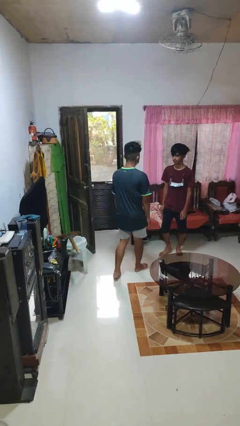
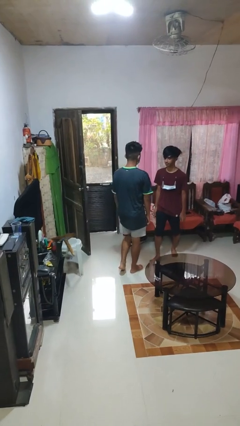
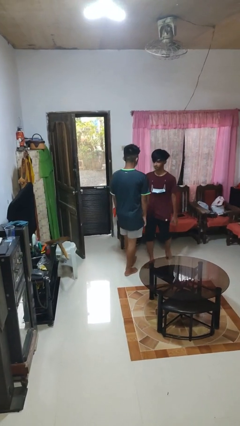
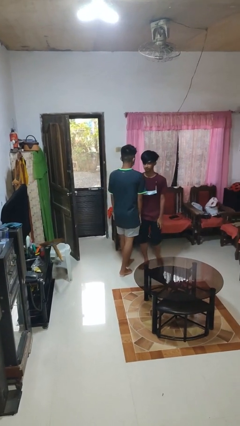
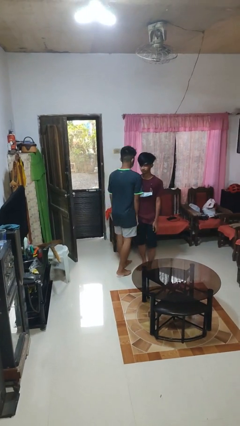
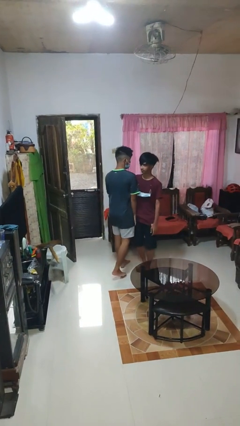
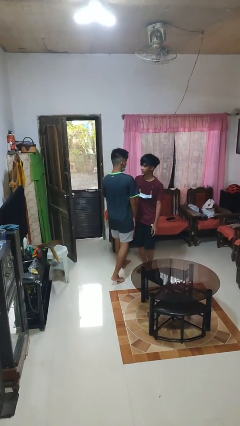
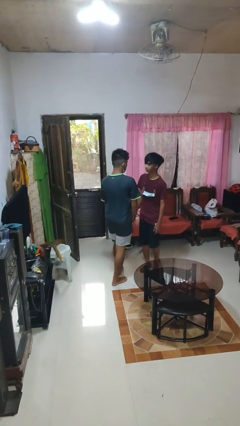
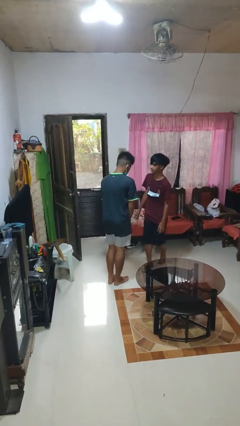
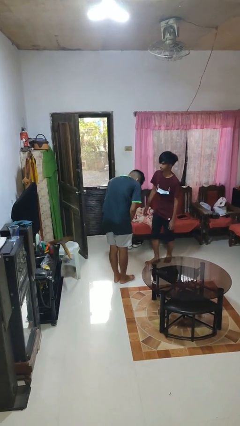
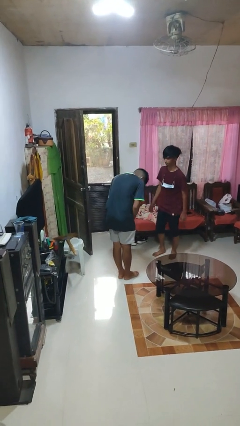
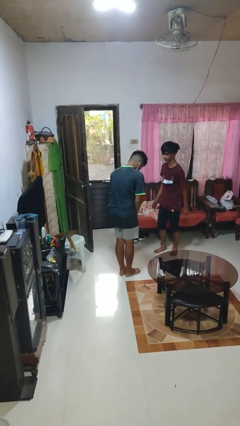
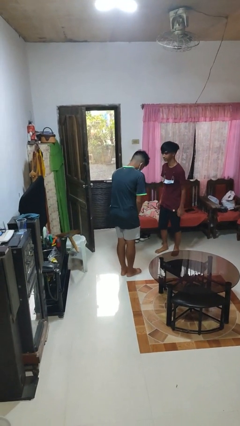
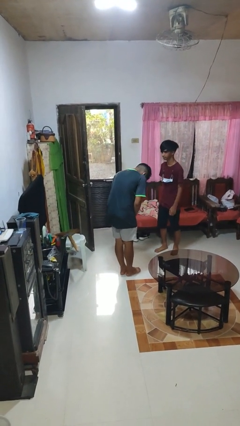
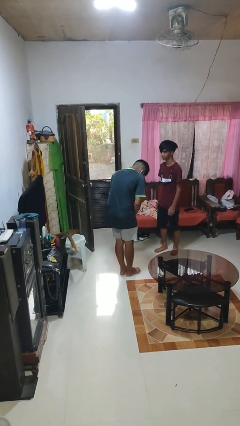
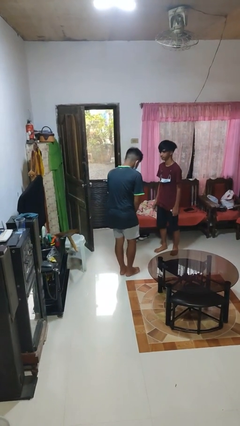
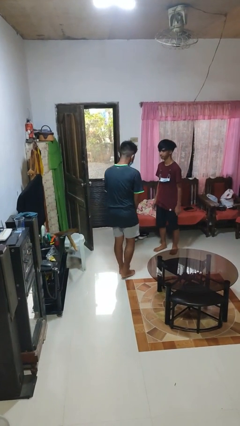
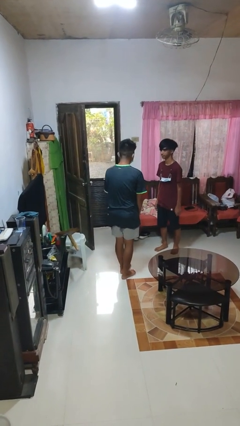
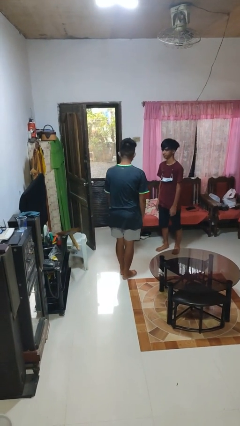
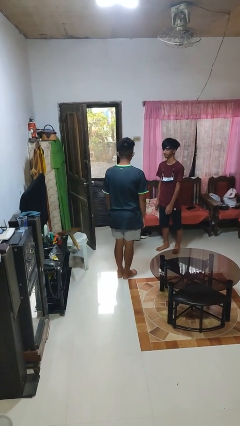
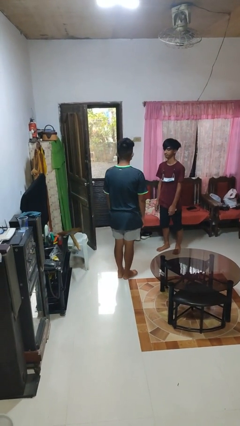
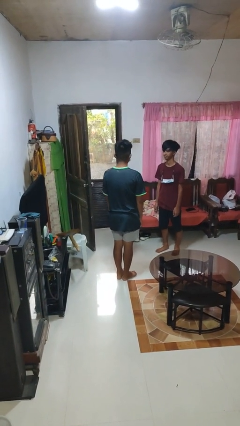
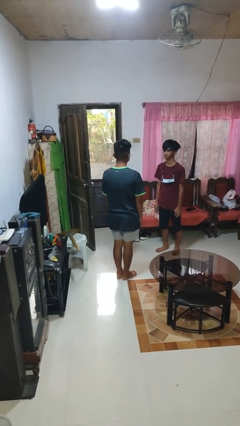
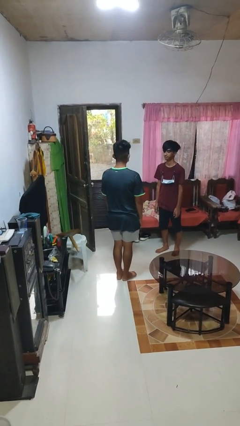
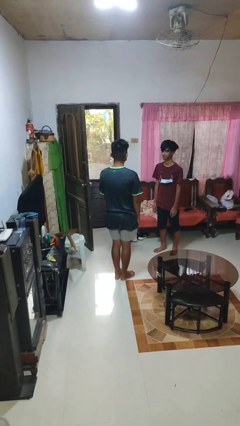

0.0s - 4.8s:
person bumps into person

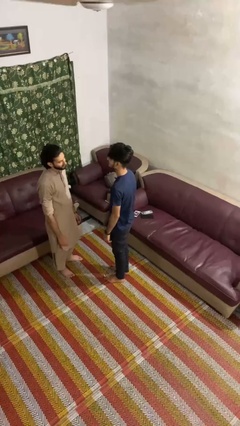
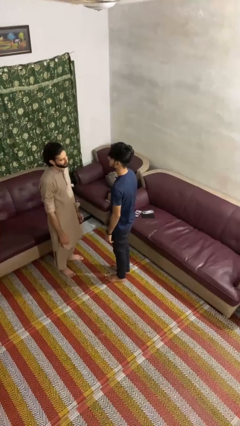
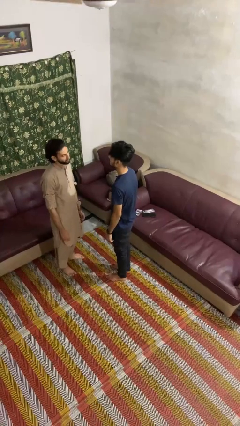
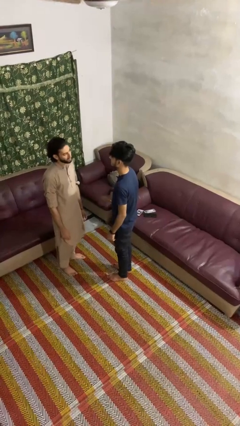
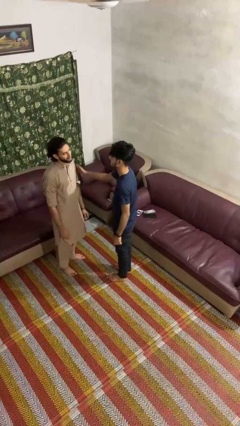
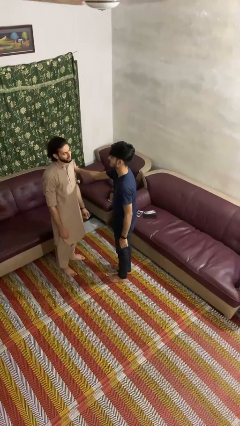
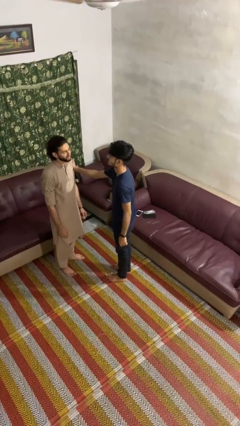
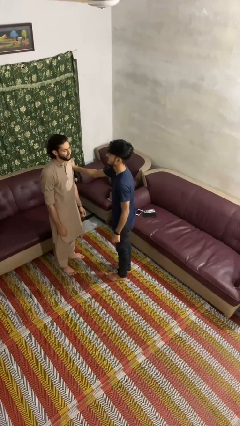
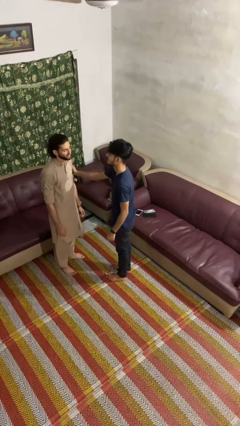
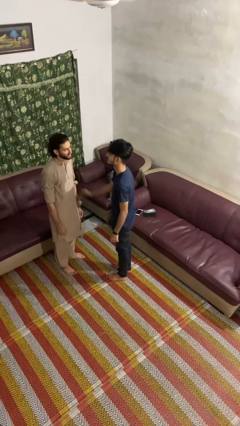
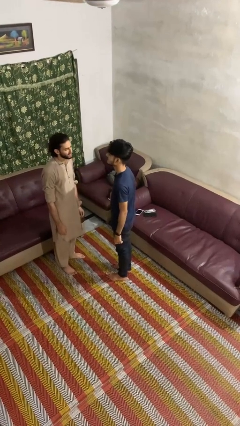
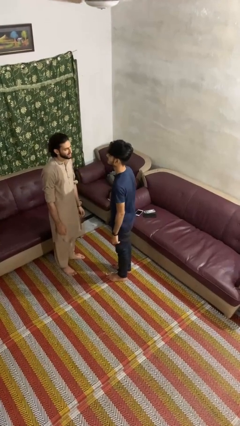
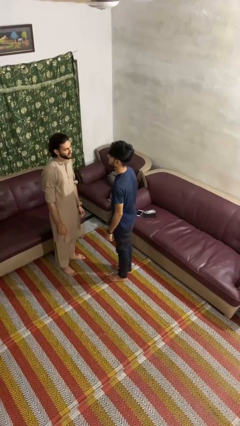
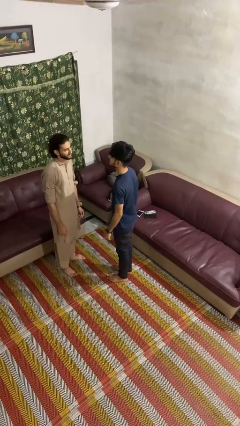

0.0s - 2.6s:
person grabs person by bicep

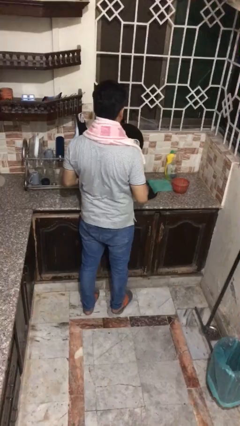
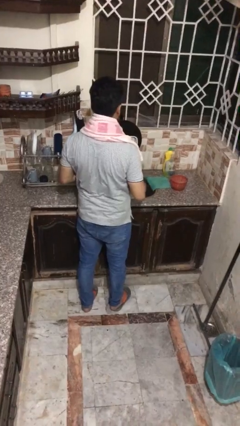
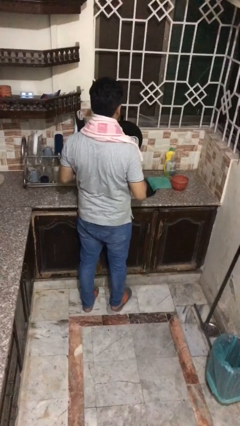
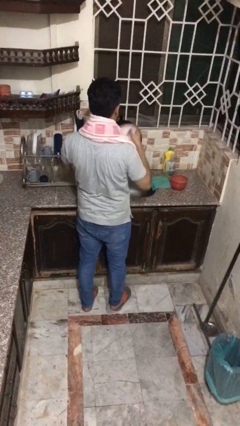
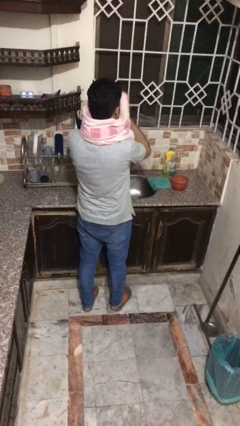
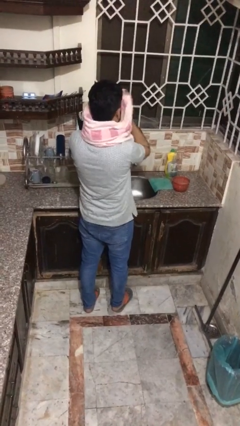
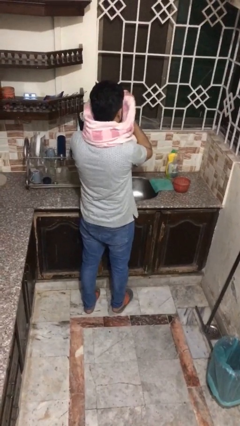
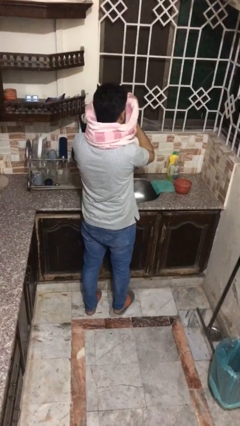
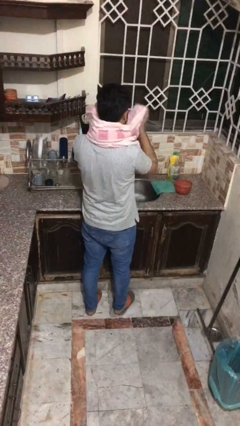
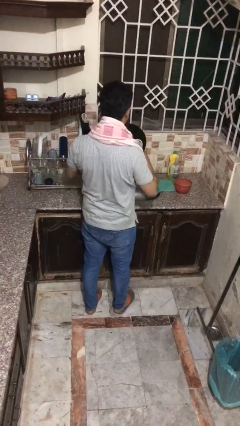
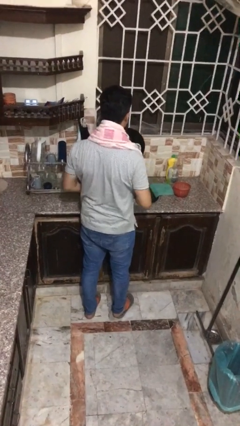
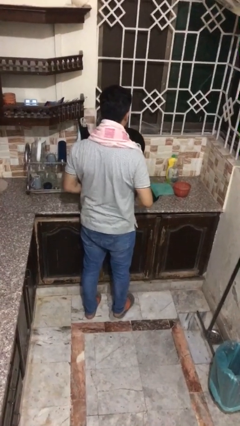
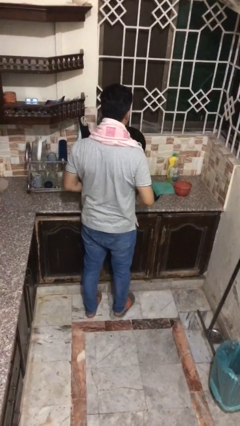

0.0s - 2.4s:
person dries face with towel

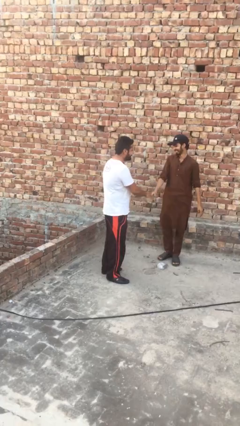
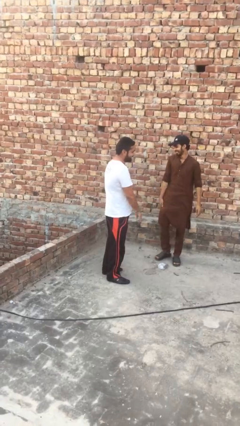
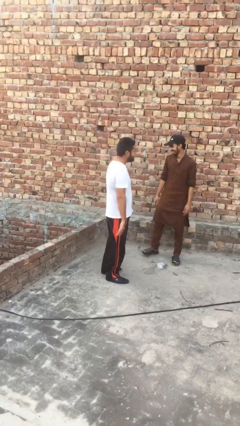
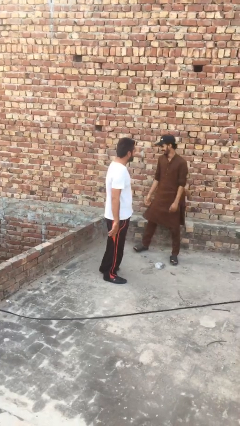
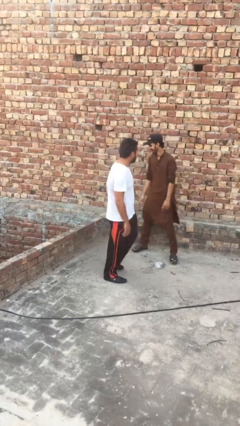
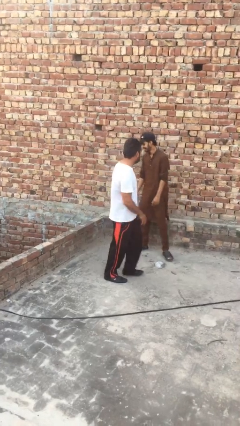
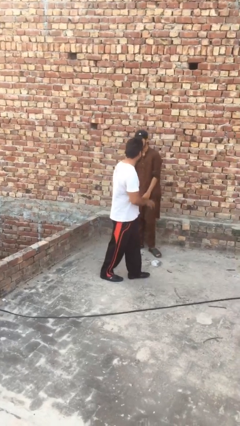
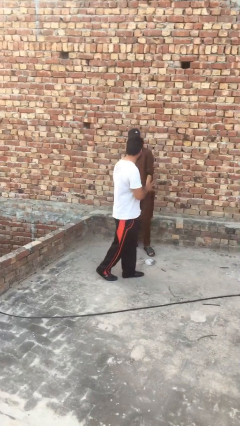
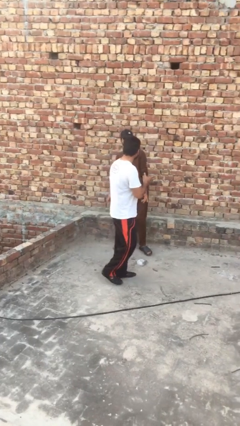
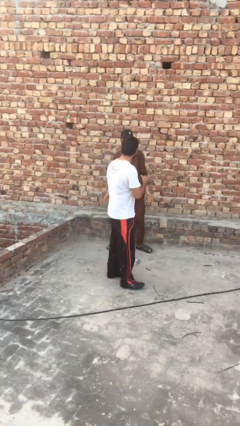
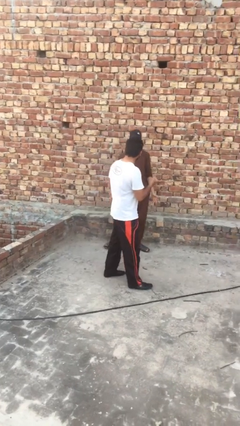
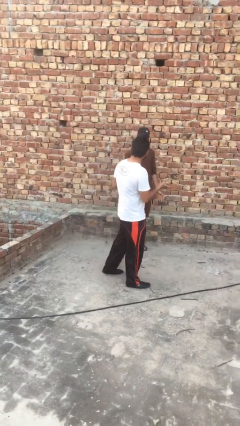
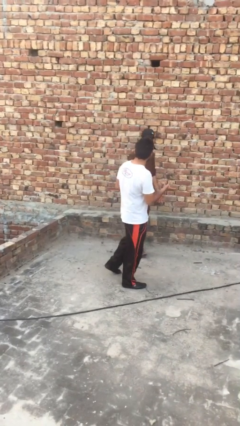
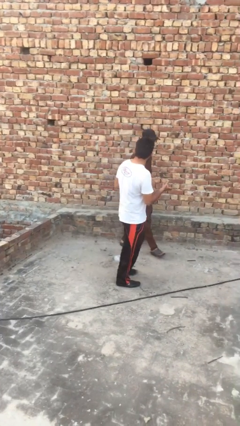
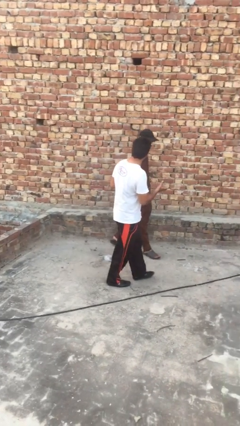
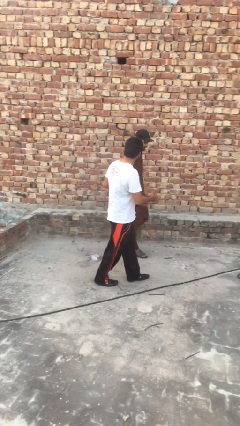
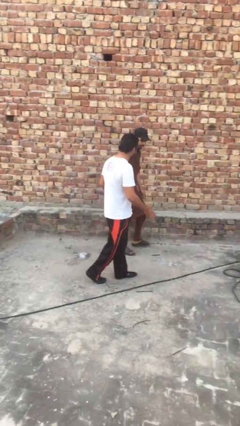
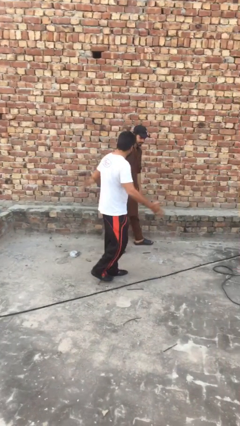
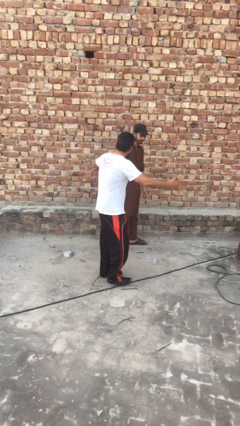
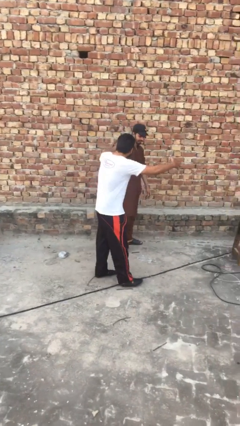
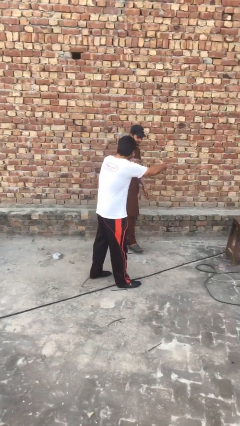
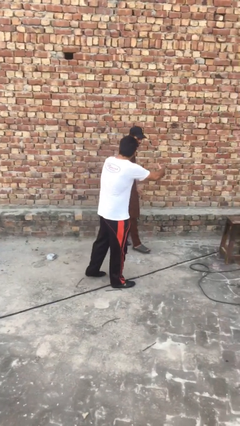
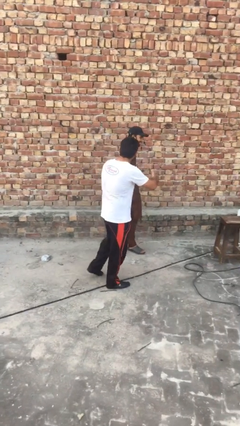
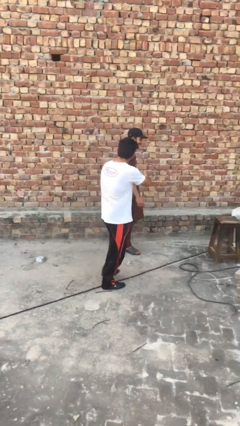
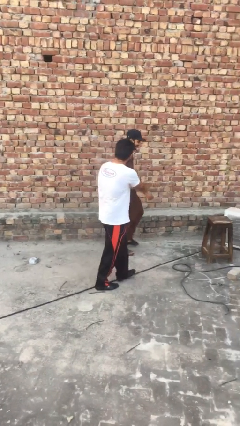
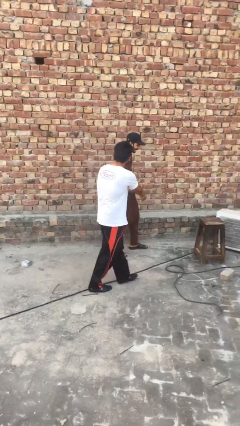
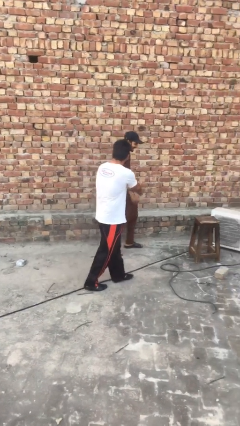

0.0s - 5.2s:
person talks to person

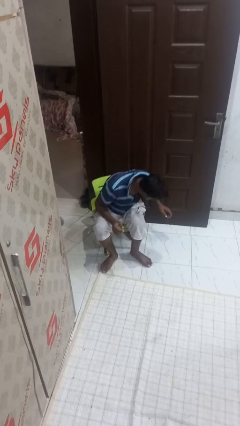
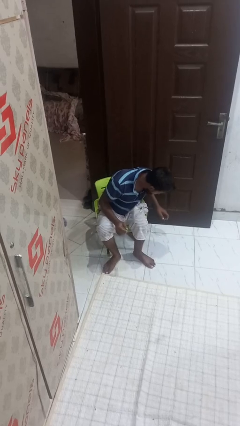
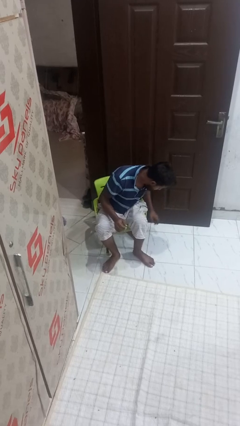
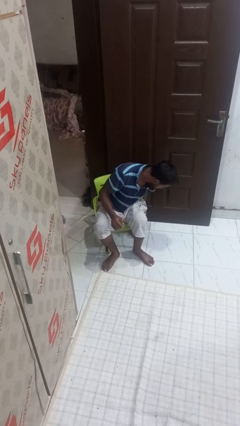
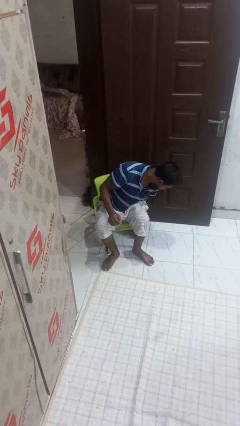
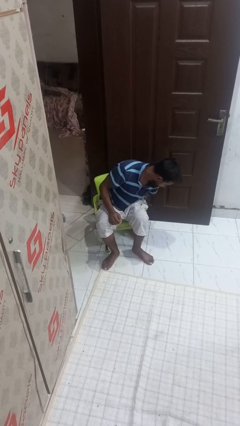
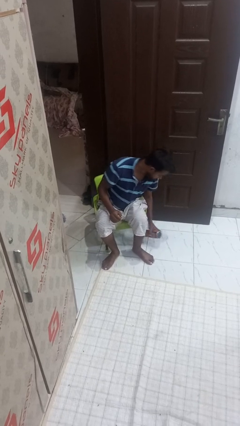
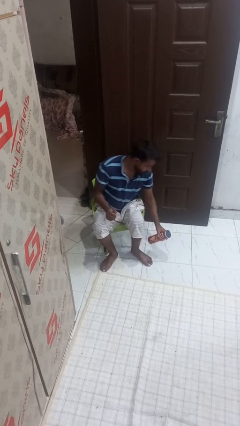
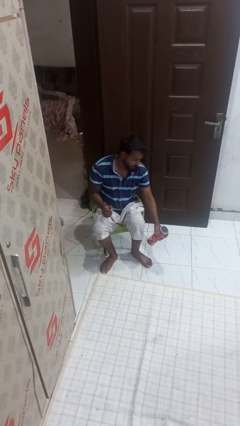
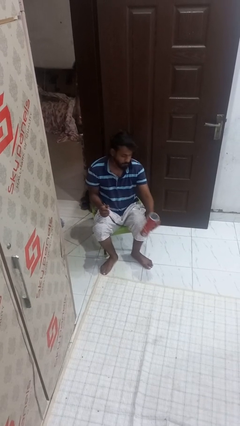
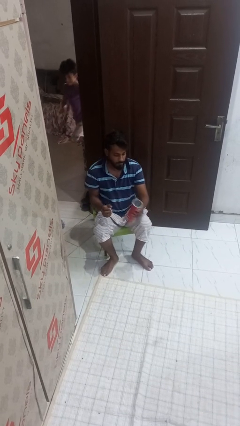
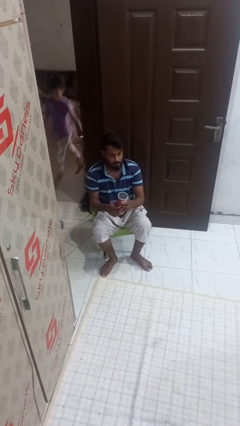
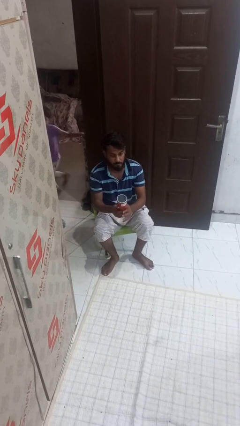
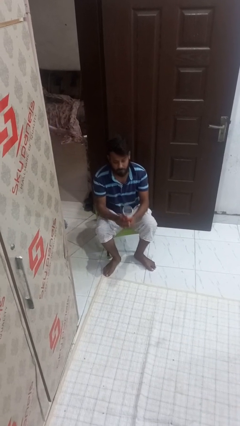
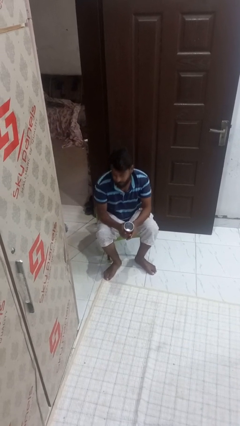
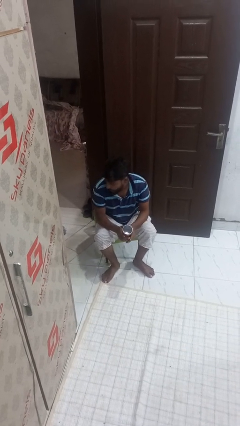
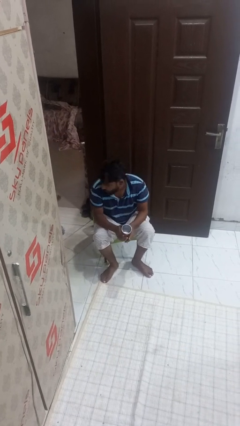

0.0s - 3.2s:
person picks up object from floor
